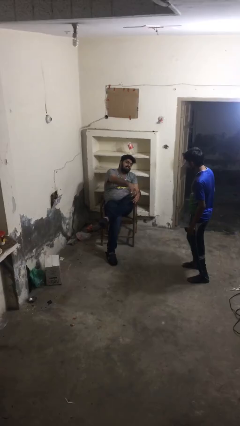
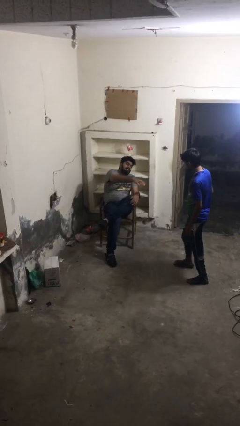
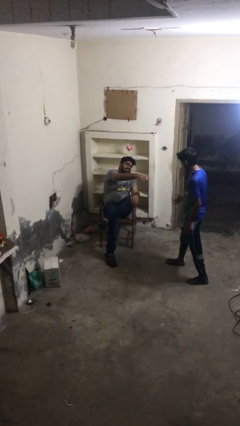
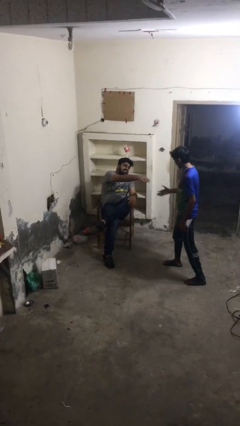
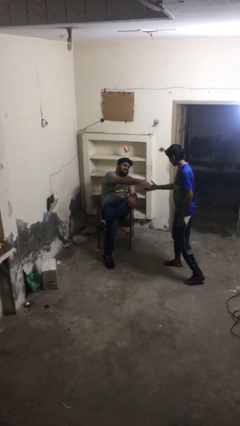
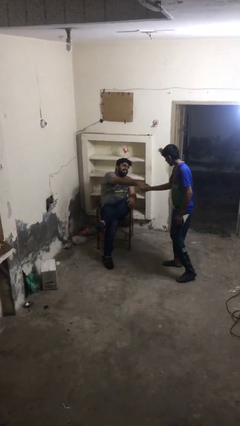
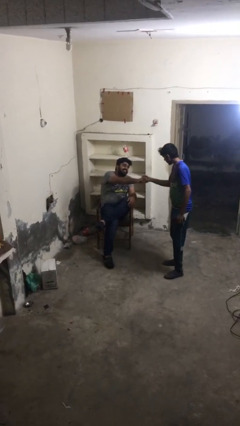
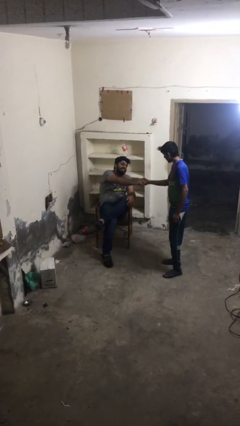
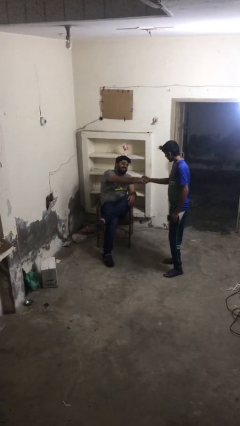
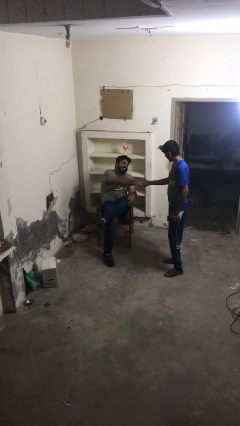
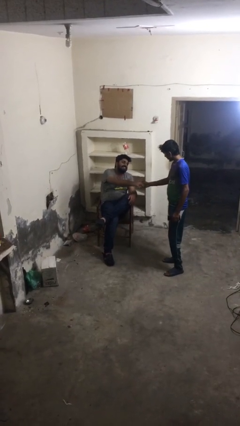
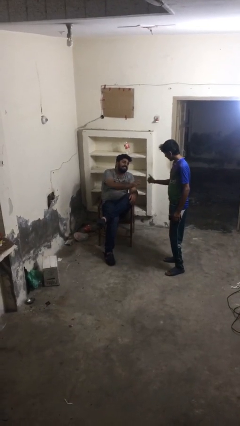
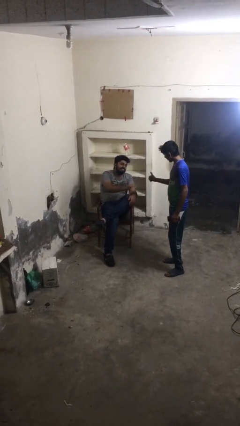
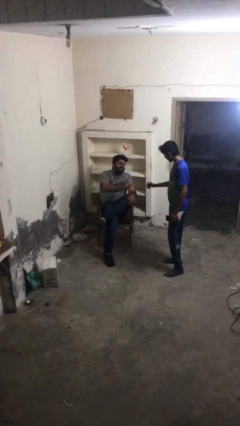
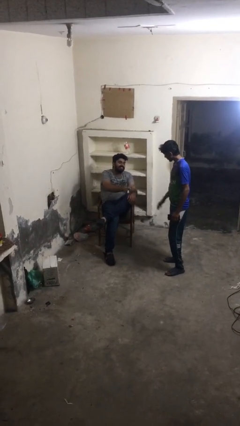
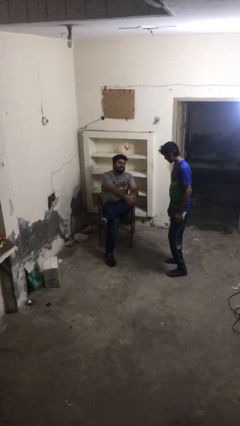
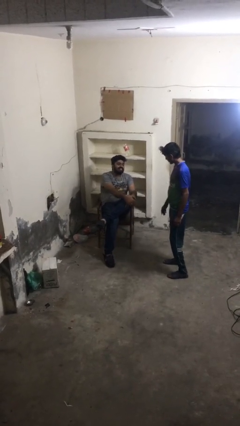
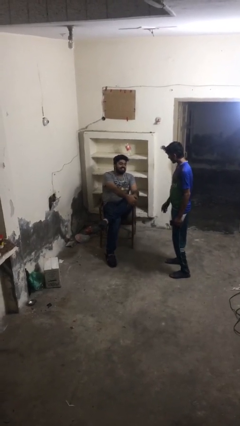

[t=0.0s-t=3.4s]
person shakes hand

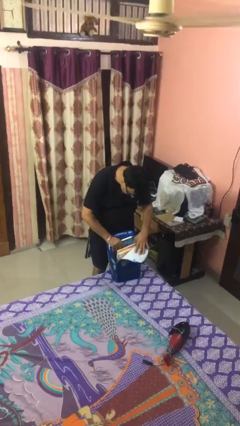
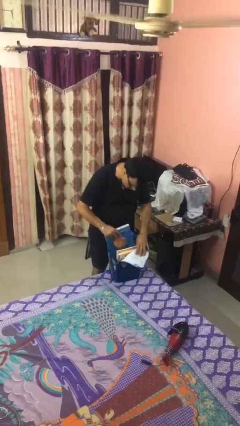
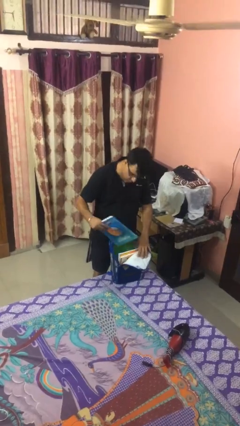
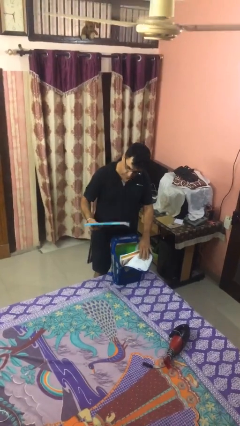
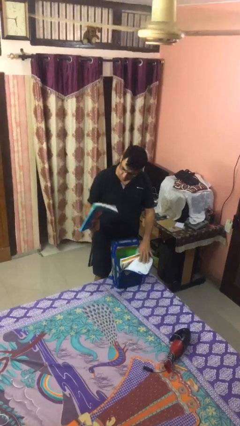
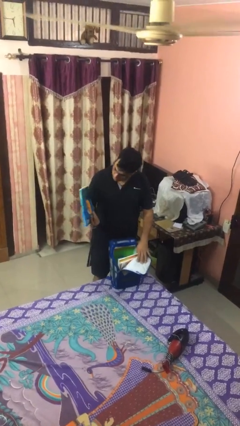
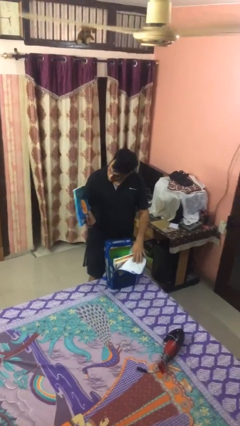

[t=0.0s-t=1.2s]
person takes object from backpack

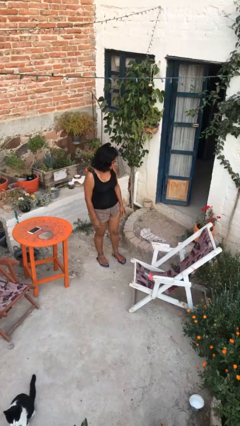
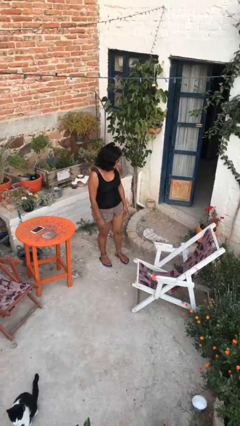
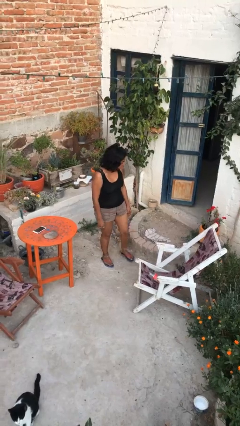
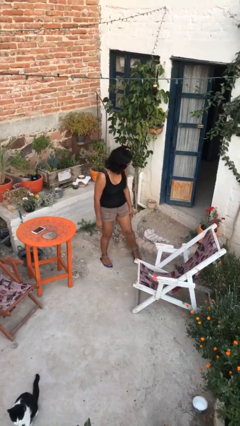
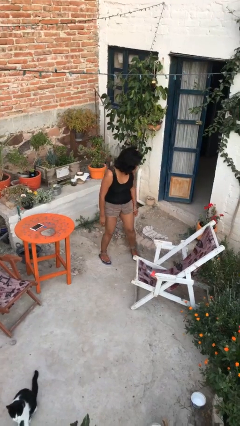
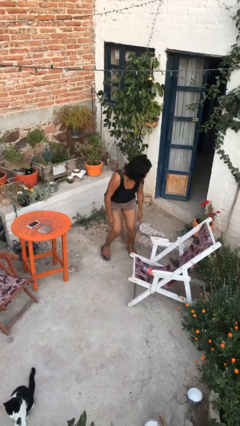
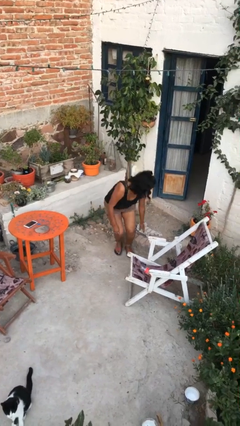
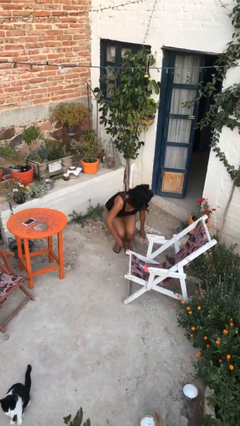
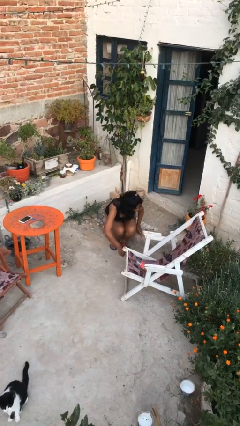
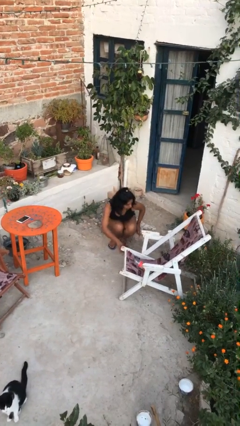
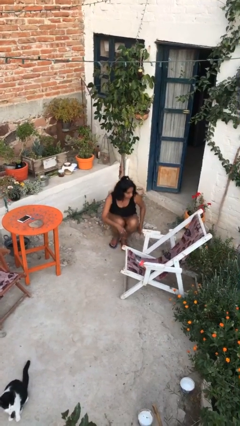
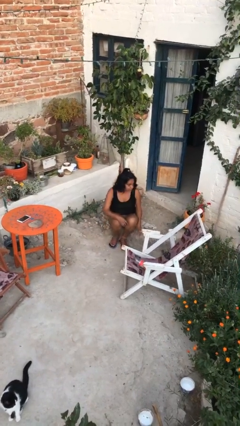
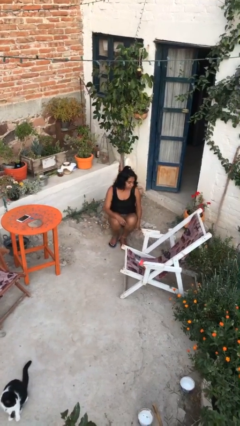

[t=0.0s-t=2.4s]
person sits down

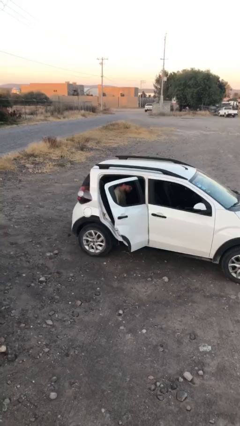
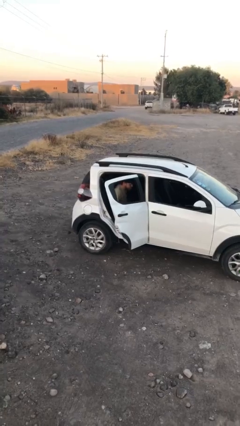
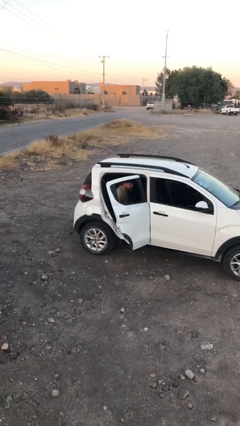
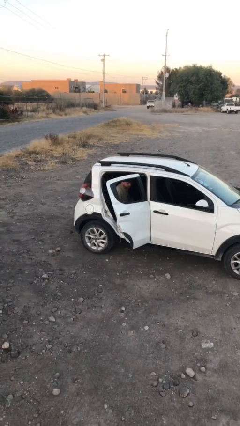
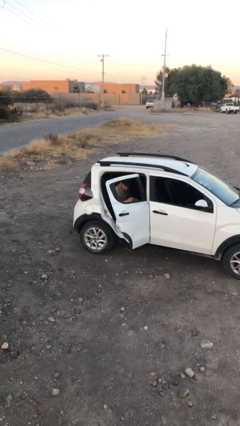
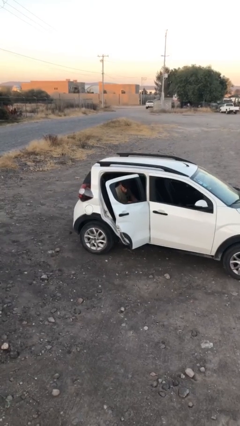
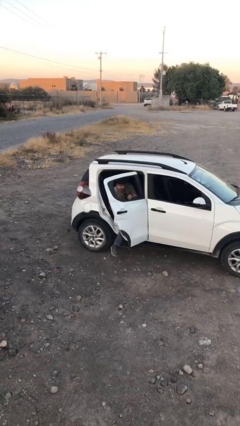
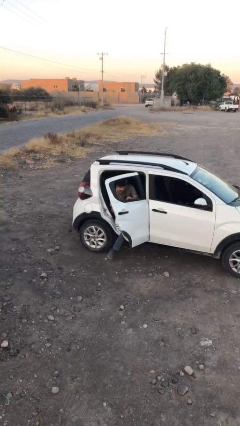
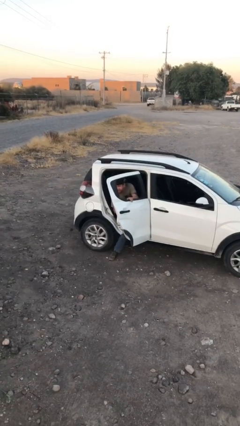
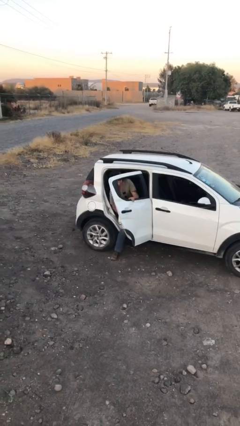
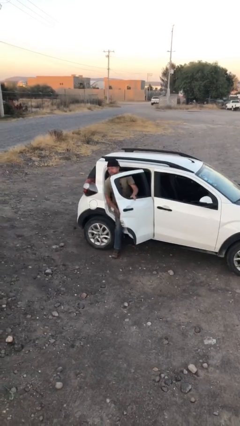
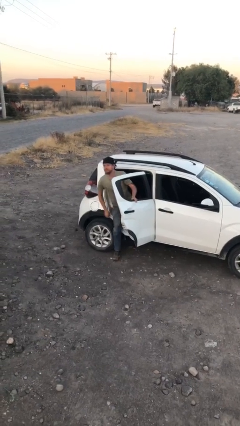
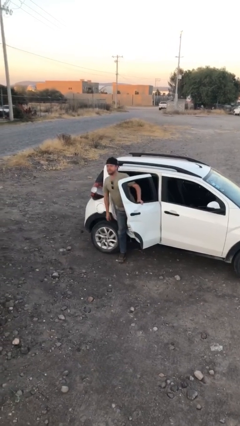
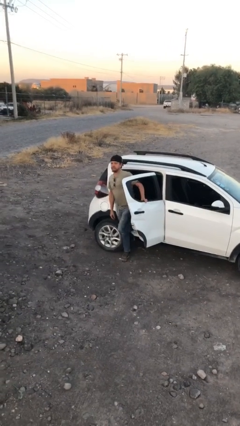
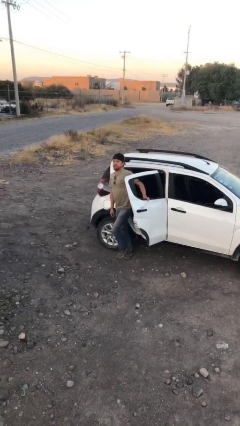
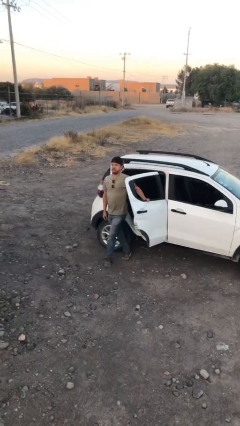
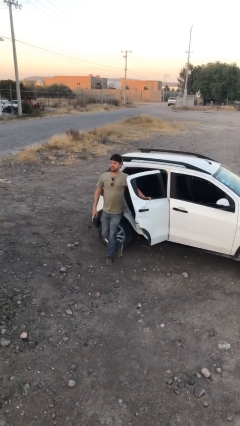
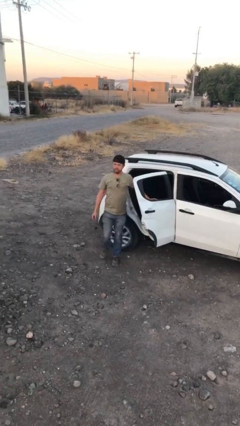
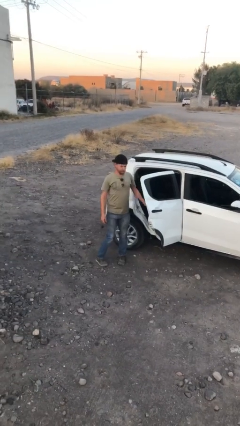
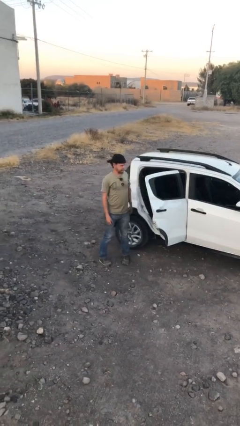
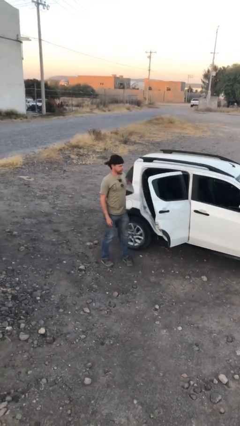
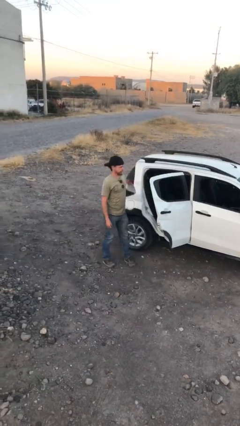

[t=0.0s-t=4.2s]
person exits car

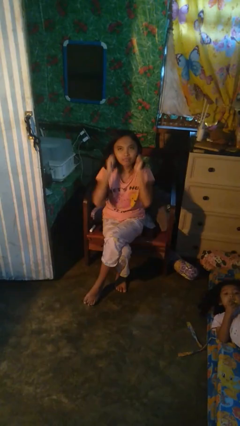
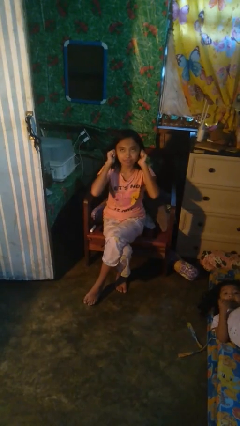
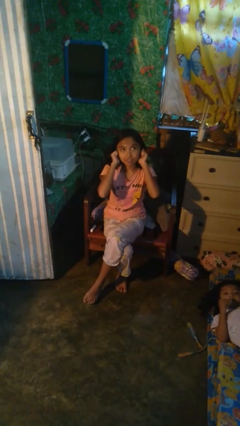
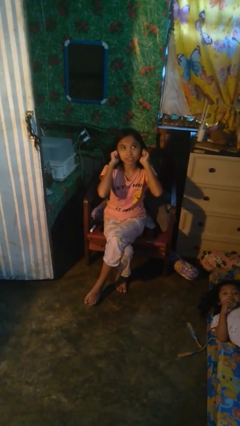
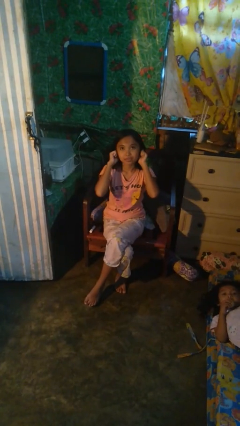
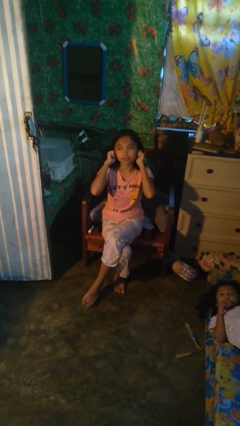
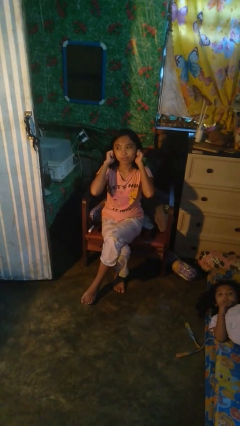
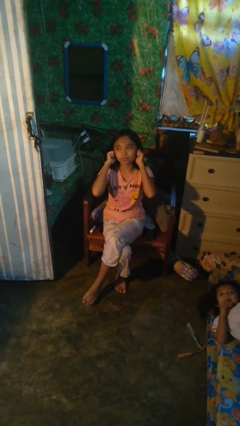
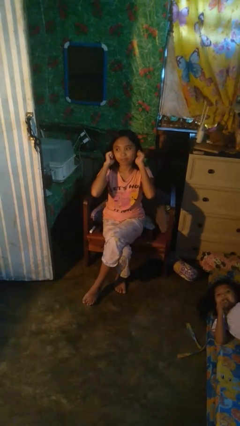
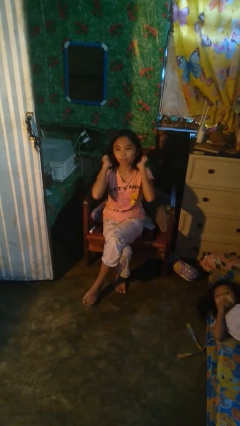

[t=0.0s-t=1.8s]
person puts fingers in ear

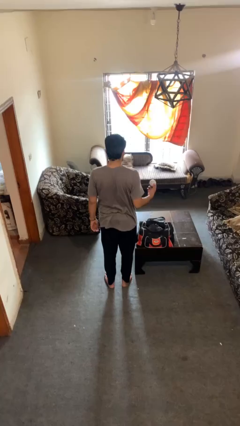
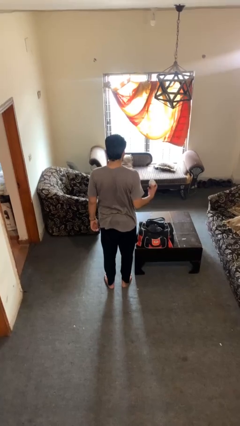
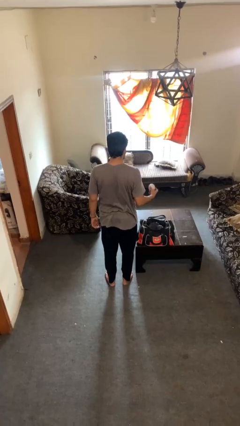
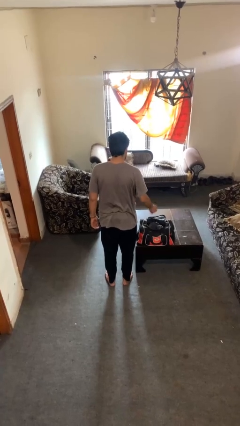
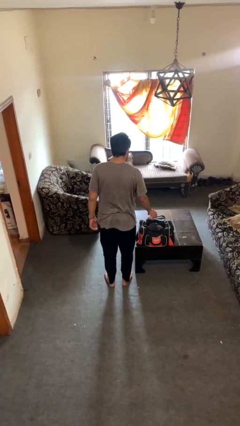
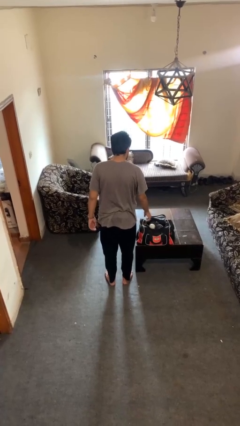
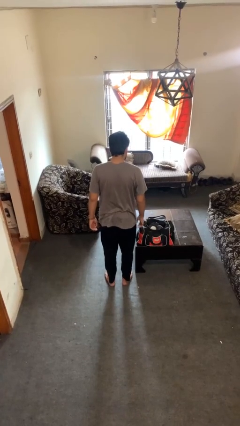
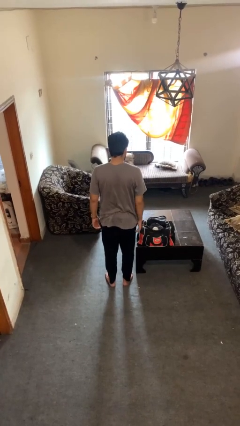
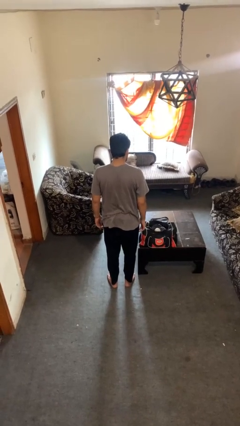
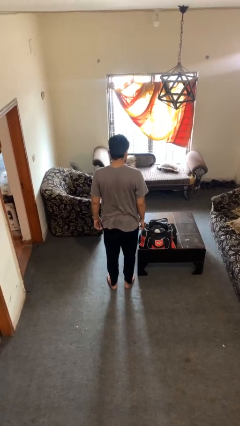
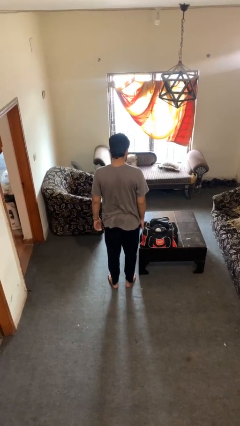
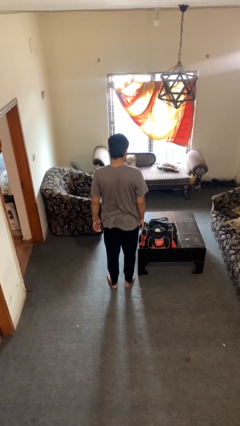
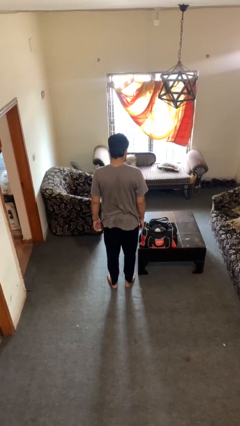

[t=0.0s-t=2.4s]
person puts object into bag

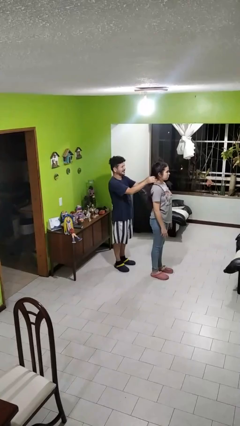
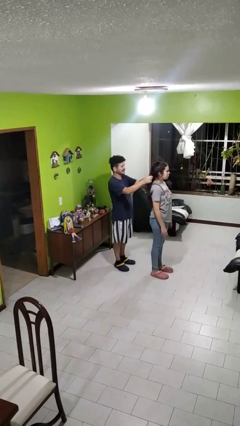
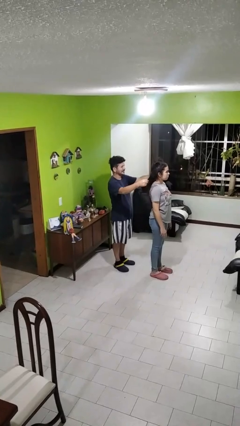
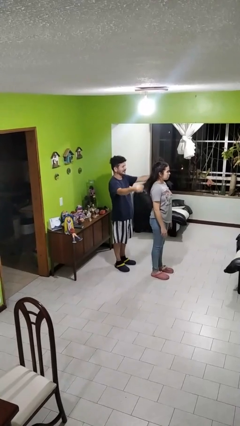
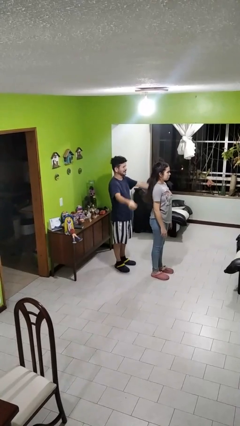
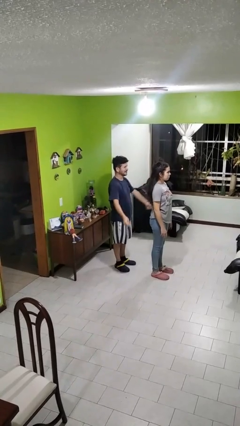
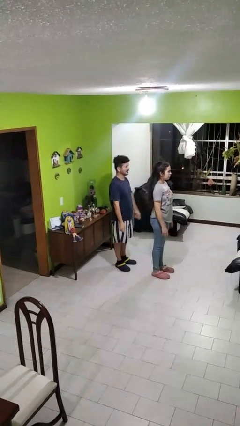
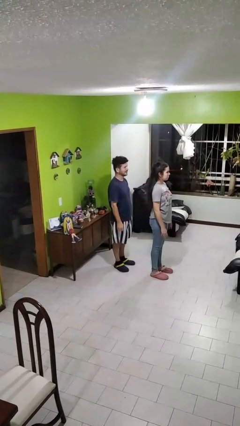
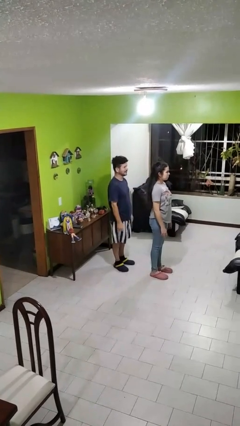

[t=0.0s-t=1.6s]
person grabs person by hair

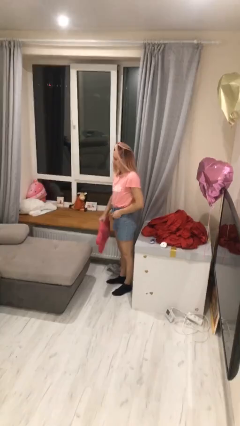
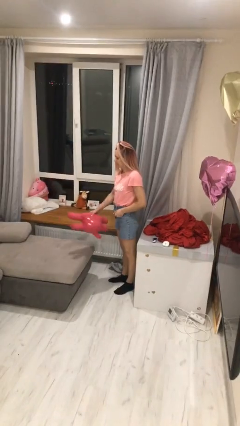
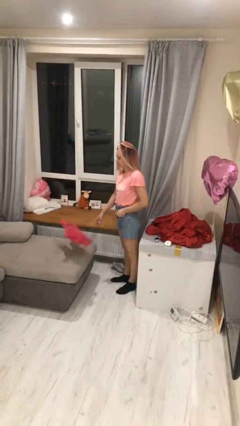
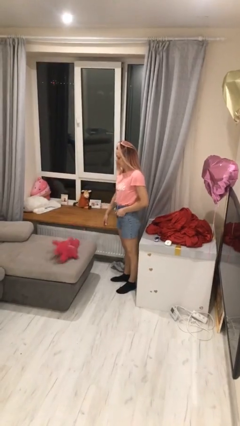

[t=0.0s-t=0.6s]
person throws object on bed
